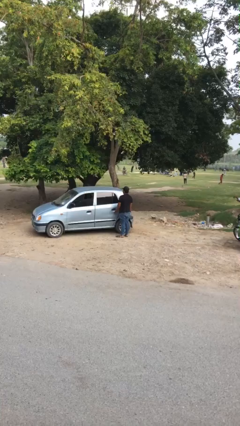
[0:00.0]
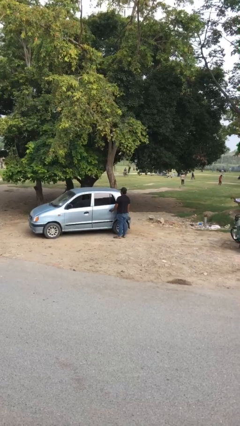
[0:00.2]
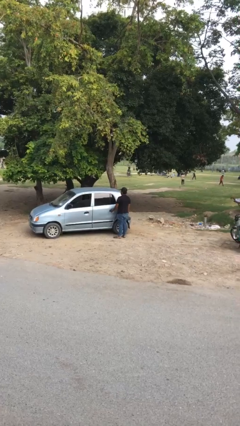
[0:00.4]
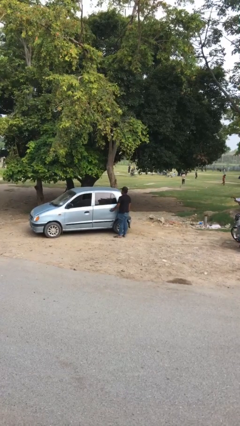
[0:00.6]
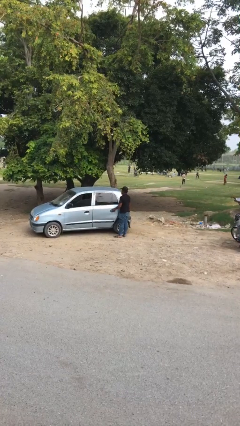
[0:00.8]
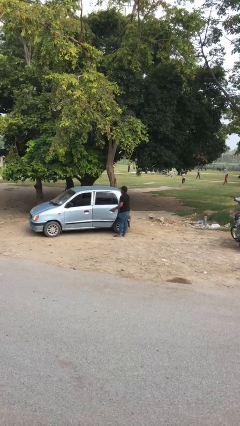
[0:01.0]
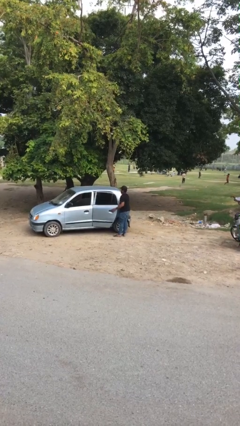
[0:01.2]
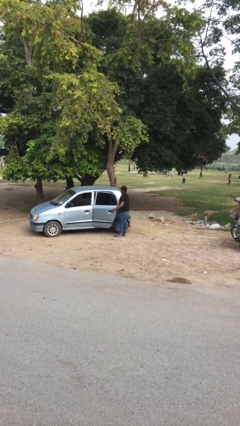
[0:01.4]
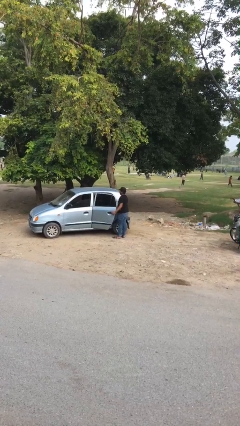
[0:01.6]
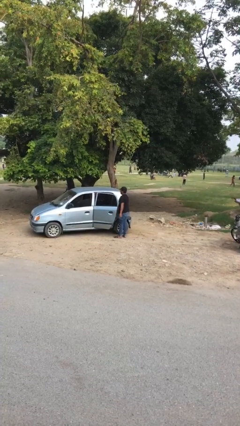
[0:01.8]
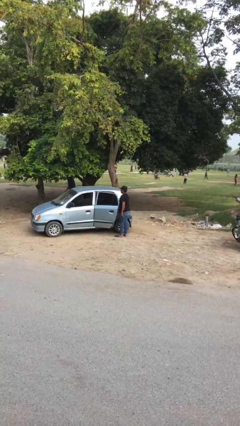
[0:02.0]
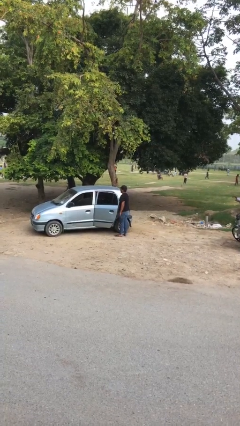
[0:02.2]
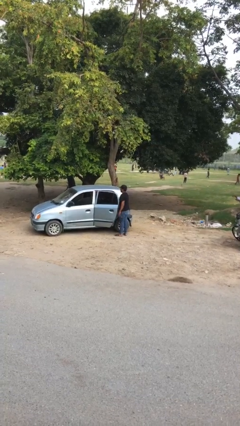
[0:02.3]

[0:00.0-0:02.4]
person opens car door

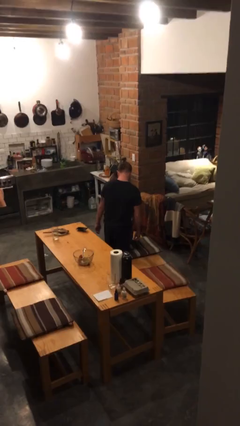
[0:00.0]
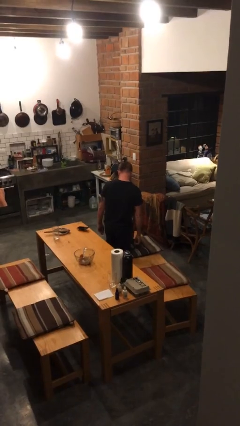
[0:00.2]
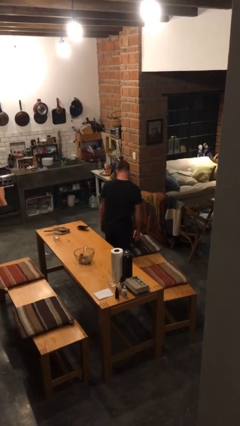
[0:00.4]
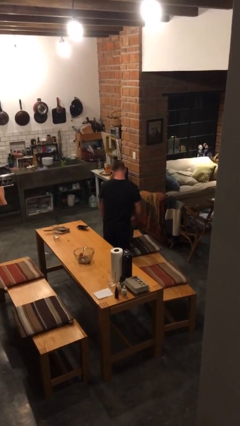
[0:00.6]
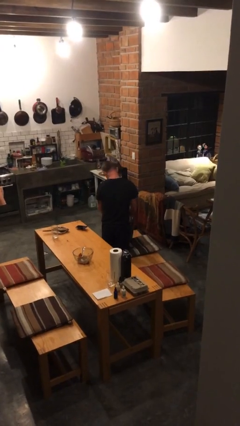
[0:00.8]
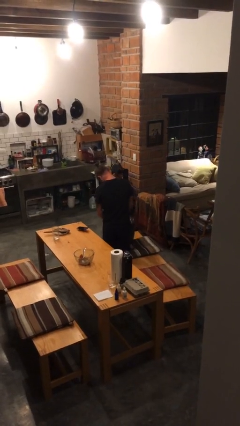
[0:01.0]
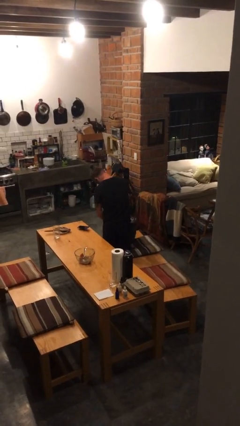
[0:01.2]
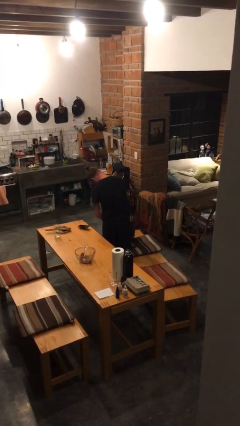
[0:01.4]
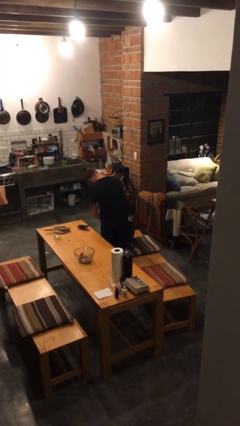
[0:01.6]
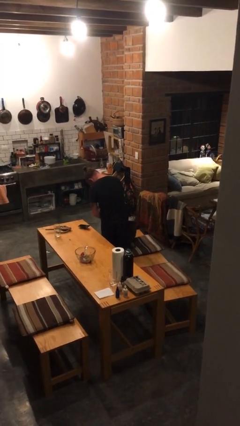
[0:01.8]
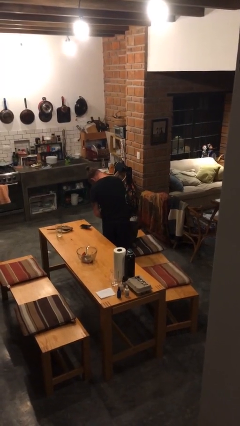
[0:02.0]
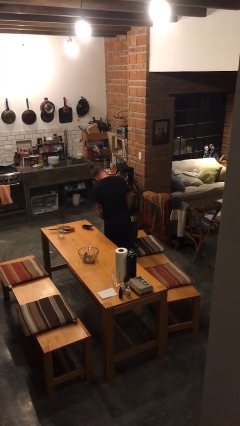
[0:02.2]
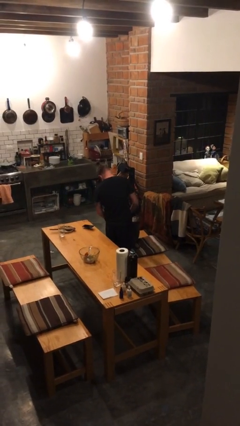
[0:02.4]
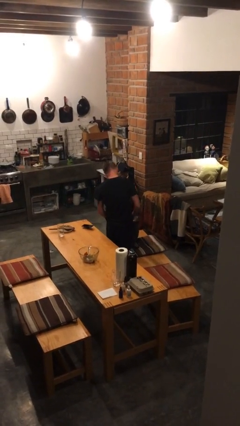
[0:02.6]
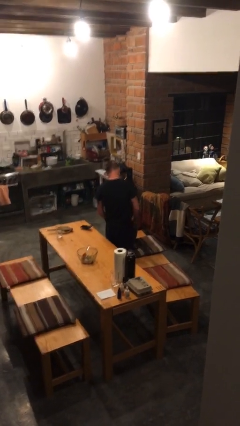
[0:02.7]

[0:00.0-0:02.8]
person searches in bag

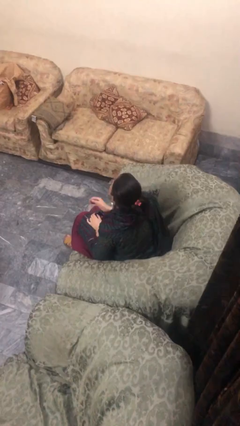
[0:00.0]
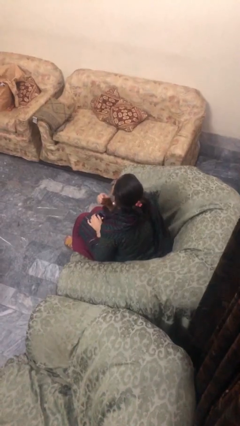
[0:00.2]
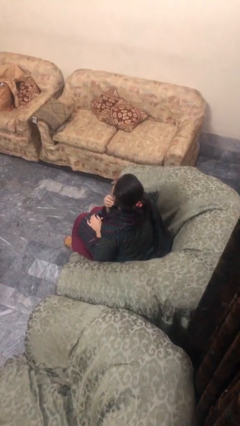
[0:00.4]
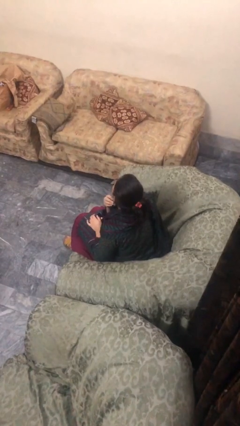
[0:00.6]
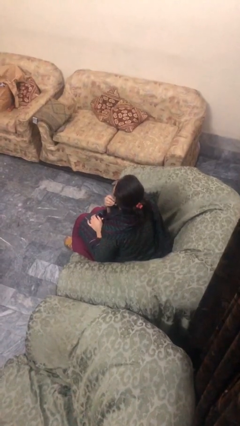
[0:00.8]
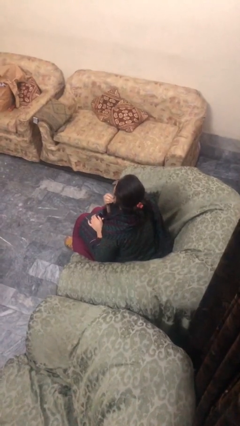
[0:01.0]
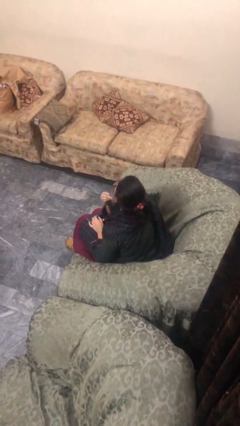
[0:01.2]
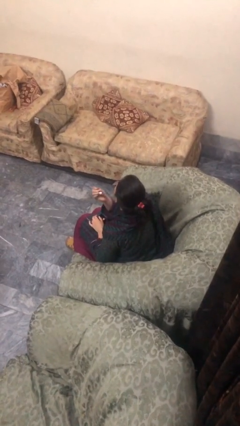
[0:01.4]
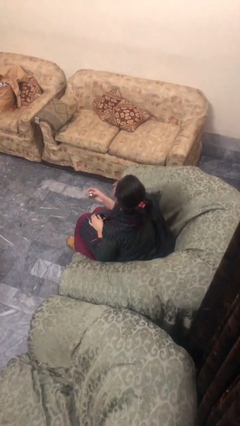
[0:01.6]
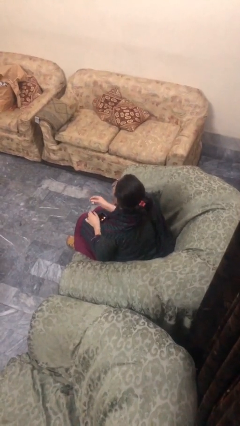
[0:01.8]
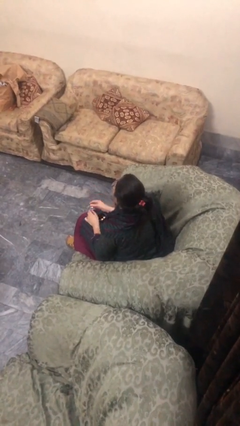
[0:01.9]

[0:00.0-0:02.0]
person takes off earrings

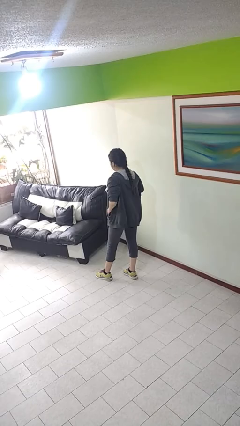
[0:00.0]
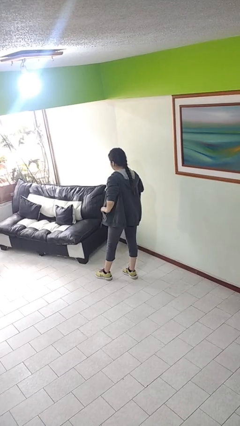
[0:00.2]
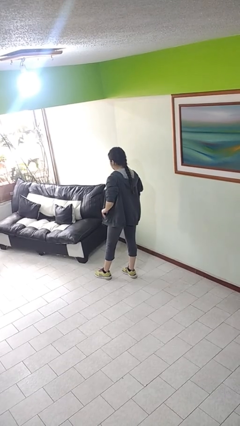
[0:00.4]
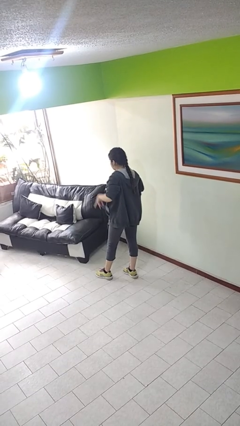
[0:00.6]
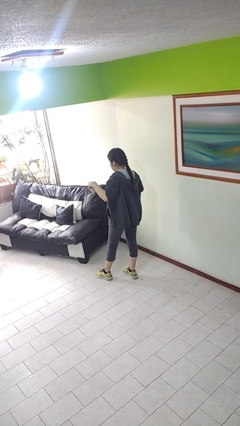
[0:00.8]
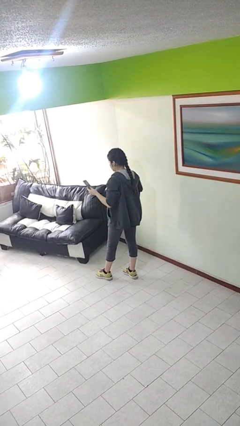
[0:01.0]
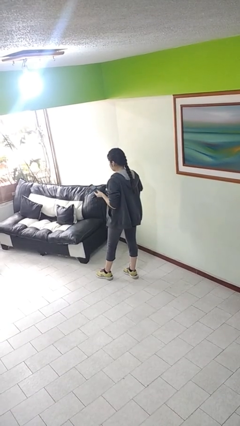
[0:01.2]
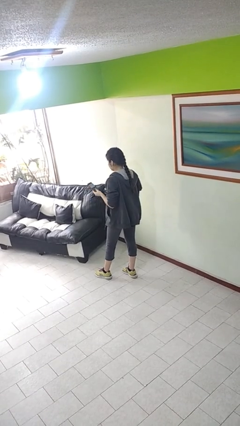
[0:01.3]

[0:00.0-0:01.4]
person takes phone from pocket

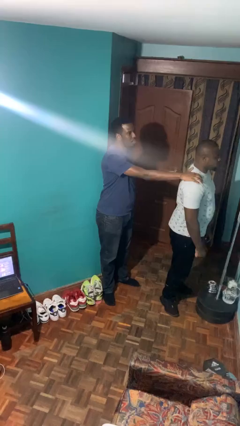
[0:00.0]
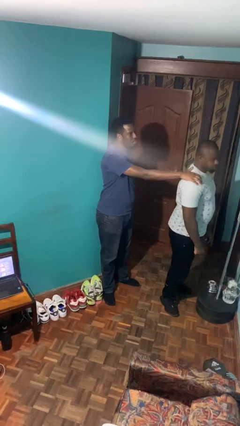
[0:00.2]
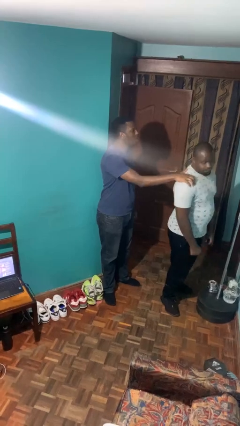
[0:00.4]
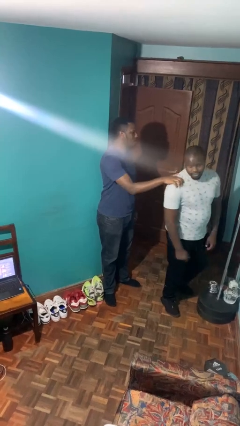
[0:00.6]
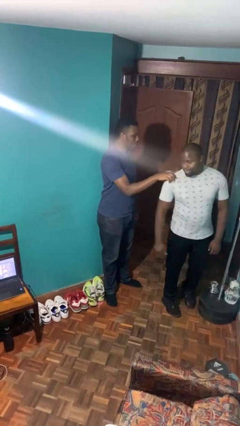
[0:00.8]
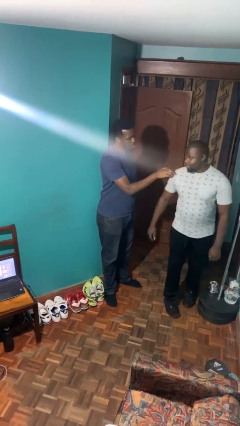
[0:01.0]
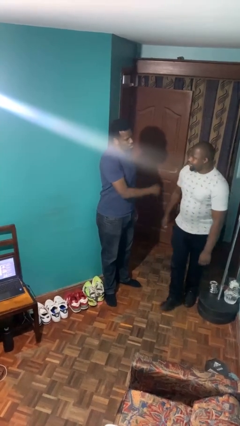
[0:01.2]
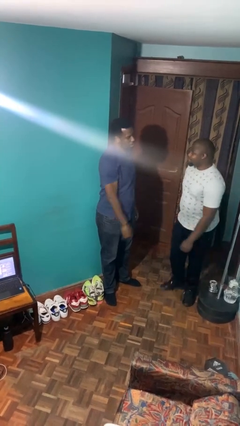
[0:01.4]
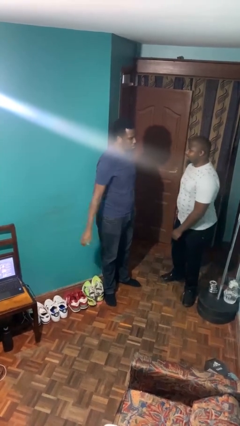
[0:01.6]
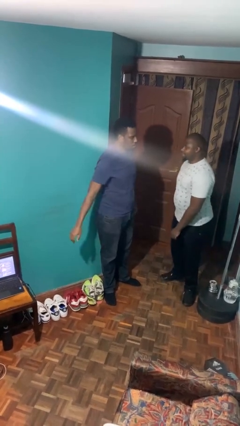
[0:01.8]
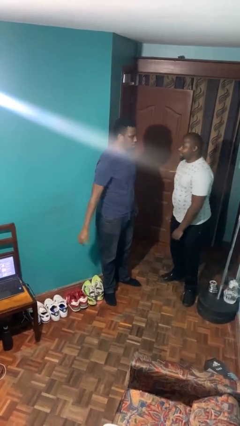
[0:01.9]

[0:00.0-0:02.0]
person spins person around

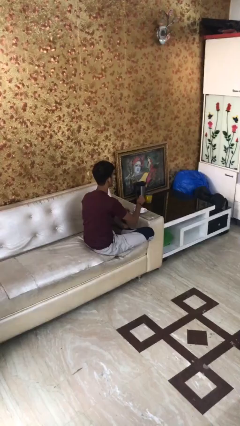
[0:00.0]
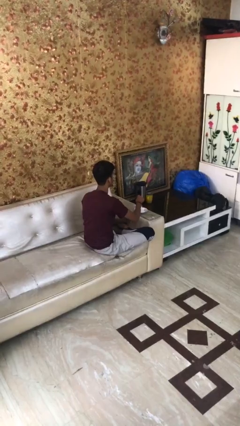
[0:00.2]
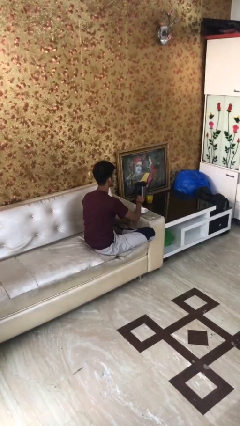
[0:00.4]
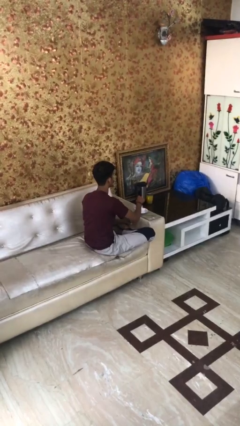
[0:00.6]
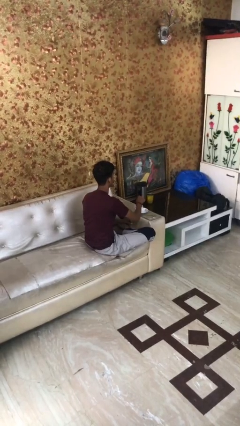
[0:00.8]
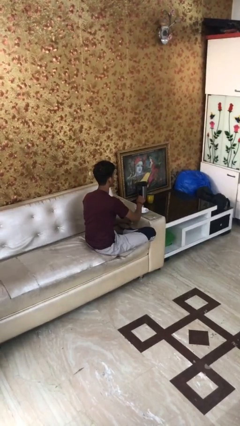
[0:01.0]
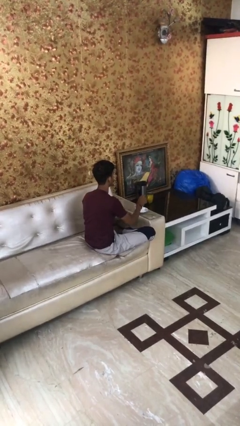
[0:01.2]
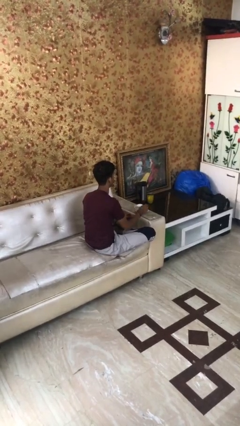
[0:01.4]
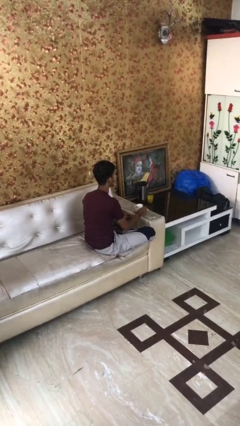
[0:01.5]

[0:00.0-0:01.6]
person stirs mug

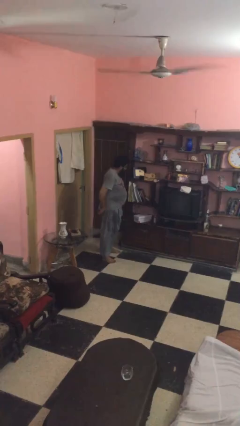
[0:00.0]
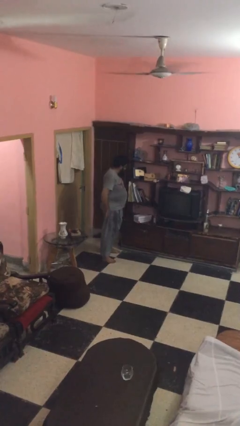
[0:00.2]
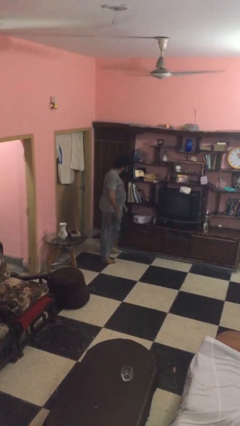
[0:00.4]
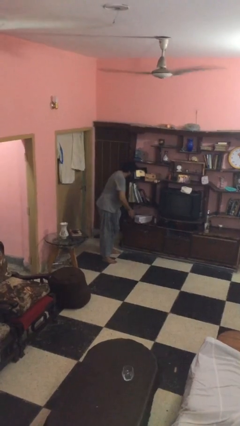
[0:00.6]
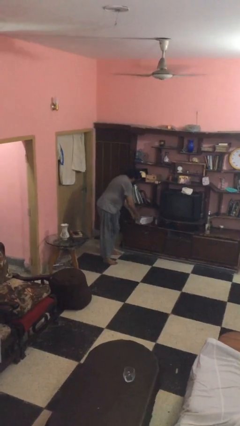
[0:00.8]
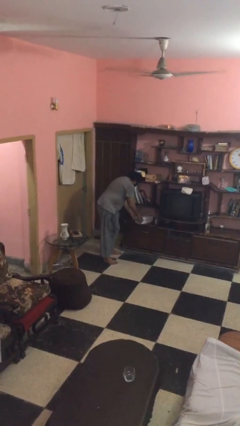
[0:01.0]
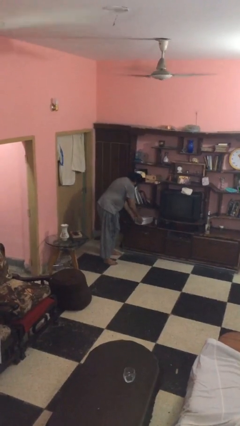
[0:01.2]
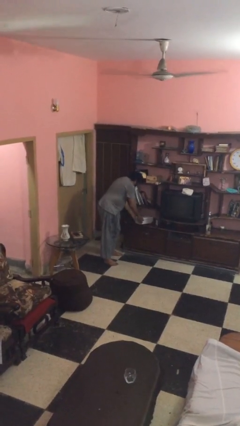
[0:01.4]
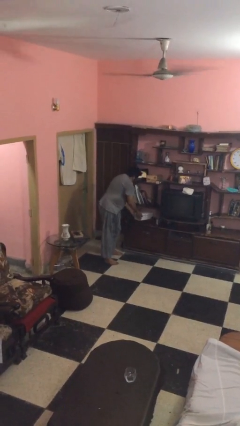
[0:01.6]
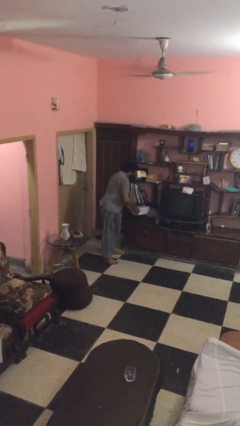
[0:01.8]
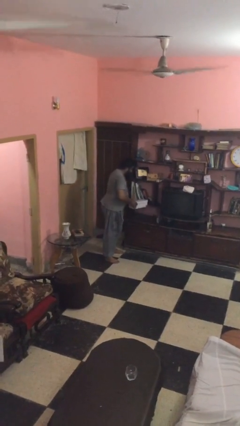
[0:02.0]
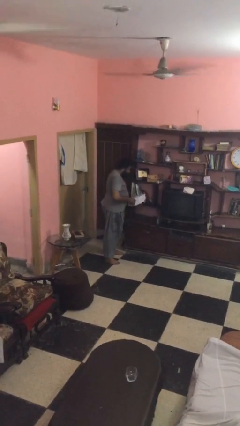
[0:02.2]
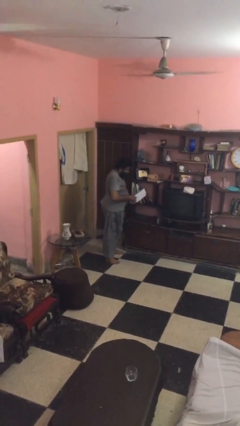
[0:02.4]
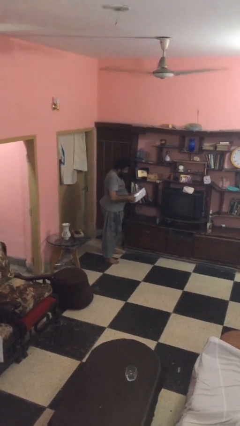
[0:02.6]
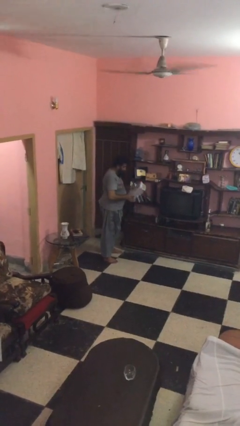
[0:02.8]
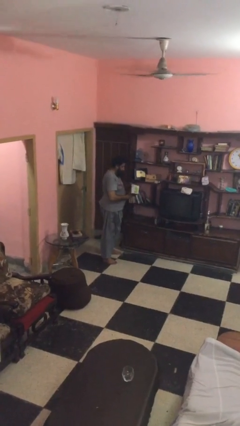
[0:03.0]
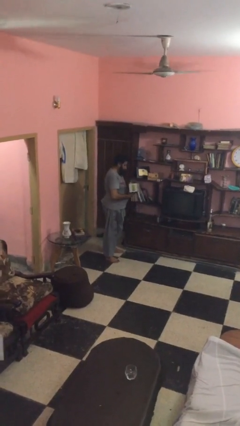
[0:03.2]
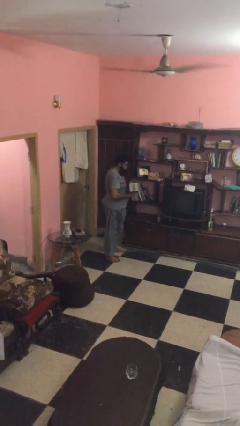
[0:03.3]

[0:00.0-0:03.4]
person picks up object from table

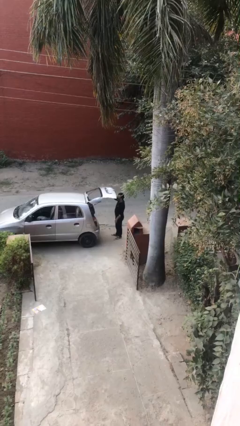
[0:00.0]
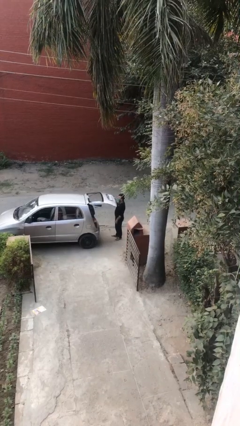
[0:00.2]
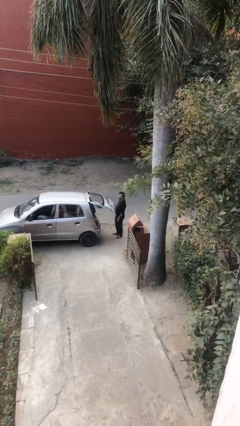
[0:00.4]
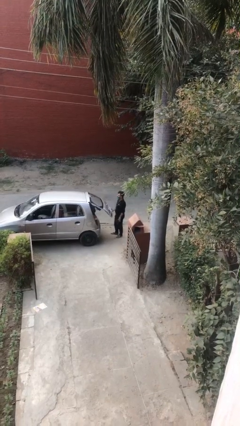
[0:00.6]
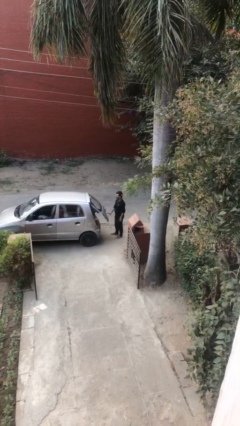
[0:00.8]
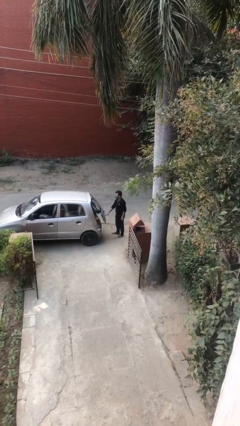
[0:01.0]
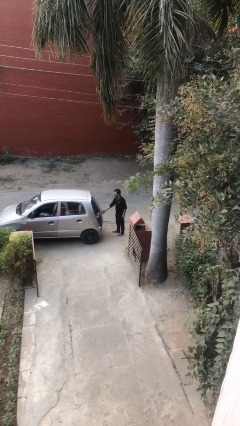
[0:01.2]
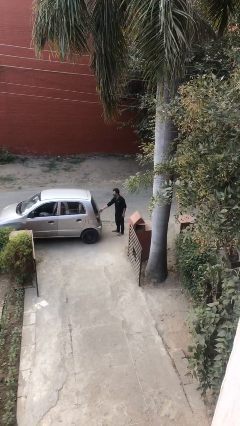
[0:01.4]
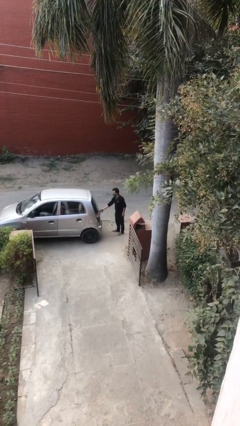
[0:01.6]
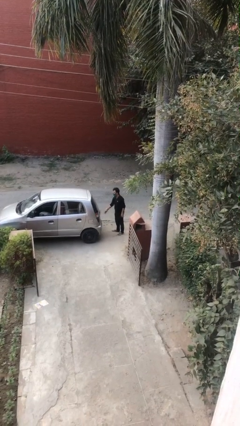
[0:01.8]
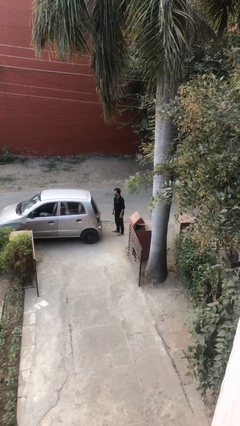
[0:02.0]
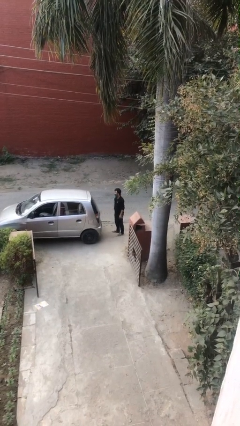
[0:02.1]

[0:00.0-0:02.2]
person closes car trunk
